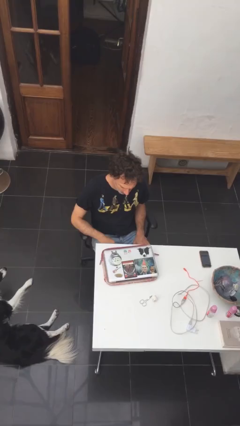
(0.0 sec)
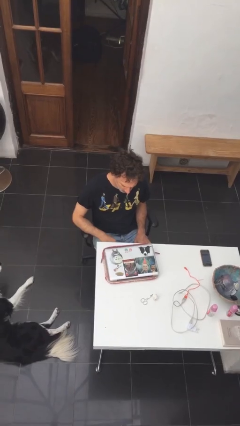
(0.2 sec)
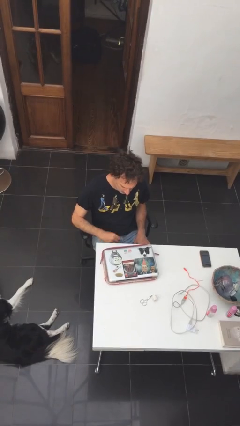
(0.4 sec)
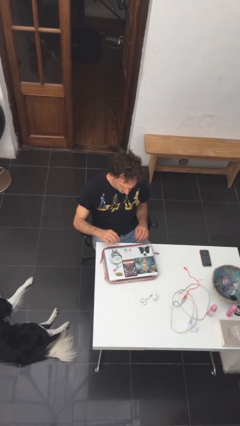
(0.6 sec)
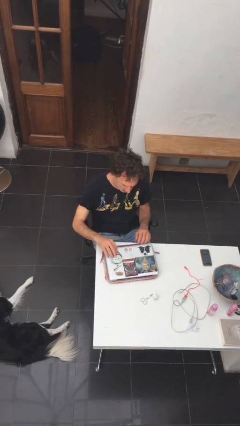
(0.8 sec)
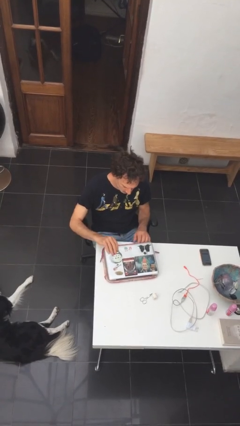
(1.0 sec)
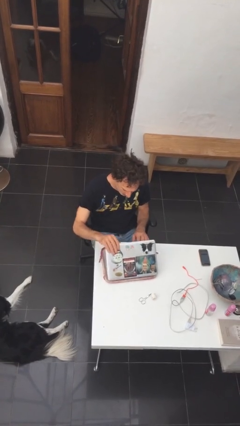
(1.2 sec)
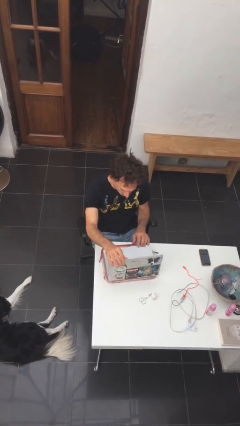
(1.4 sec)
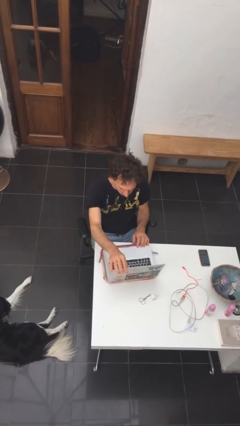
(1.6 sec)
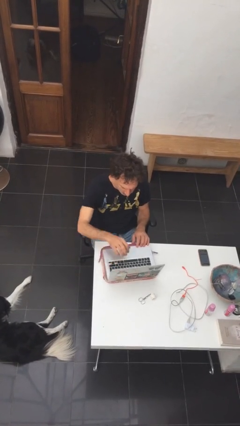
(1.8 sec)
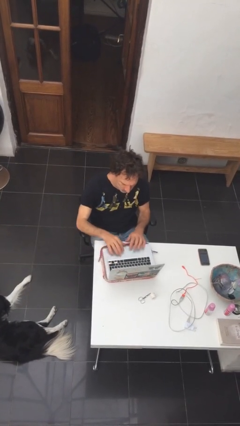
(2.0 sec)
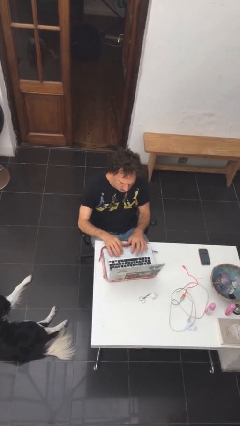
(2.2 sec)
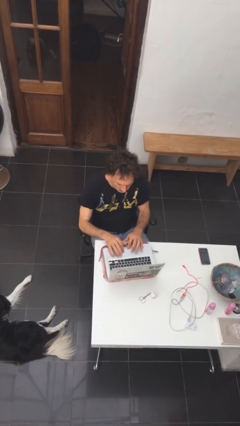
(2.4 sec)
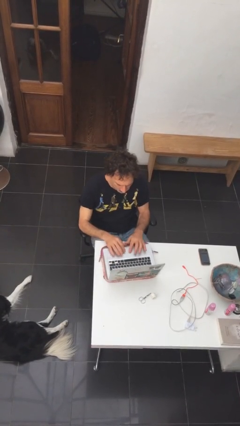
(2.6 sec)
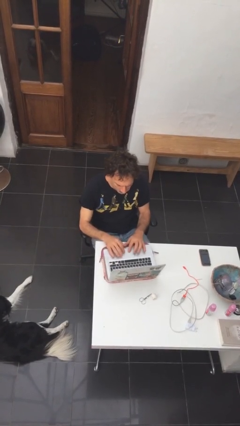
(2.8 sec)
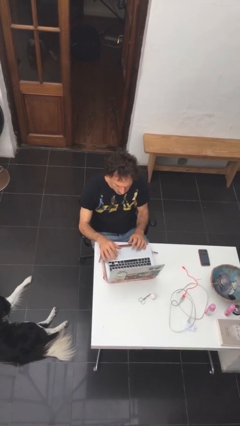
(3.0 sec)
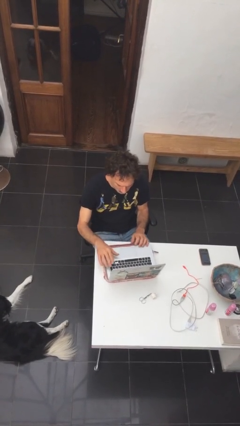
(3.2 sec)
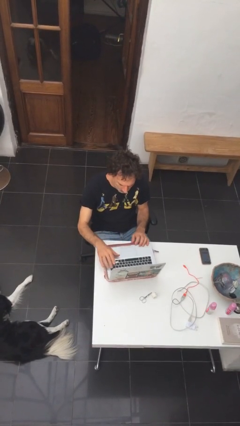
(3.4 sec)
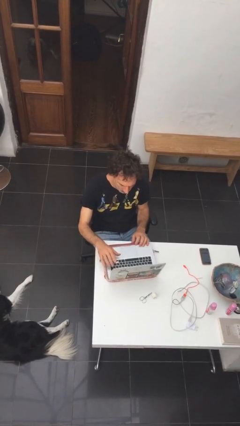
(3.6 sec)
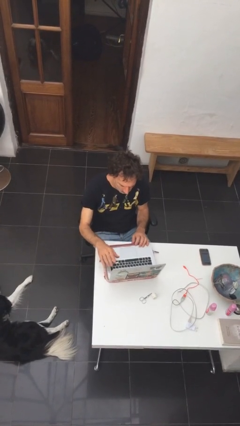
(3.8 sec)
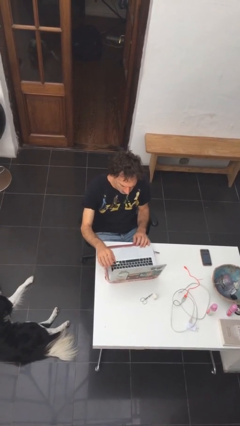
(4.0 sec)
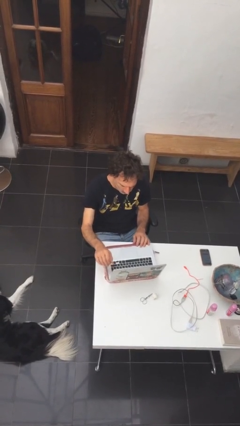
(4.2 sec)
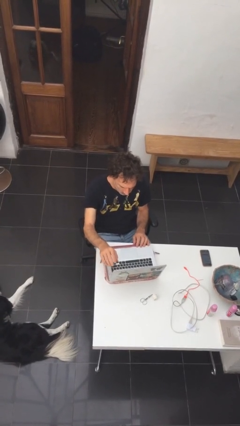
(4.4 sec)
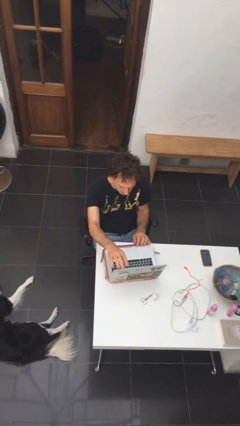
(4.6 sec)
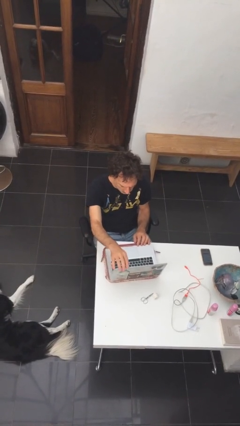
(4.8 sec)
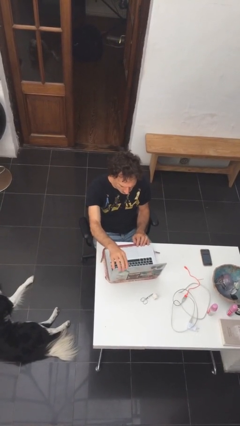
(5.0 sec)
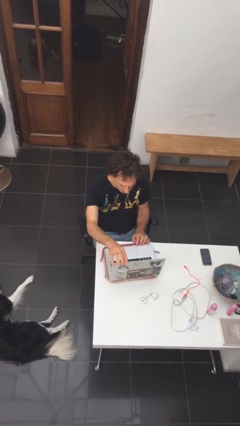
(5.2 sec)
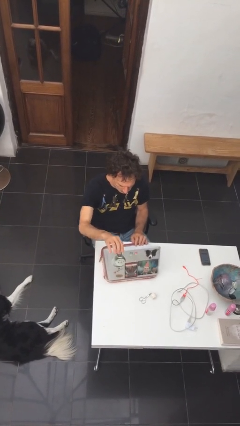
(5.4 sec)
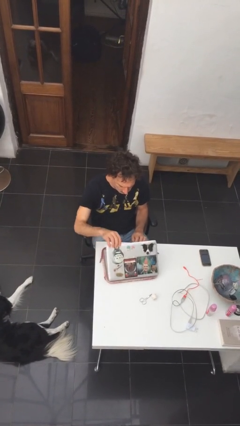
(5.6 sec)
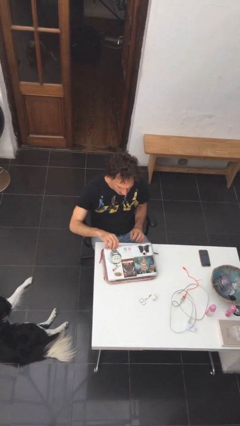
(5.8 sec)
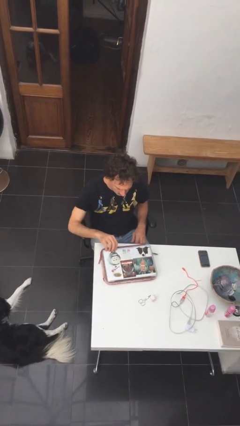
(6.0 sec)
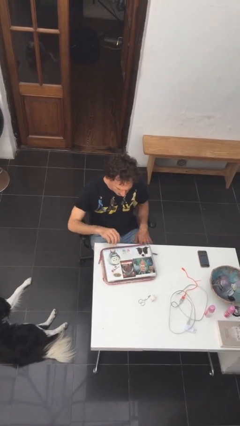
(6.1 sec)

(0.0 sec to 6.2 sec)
person interacts with laptop

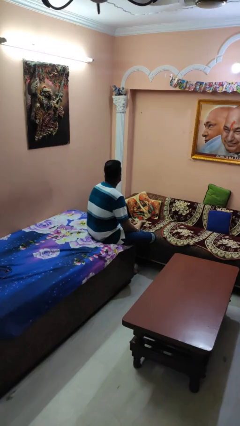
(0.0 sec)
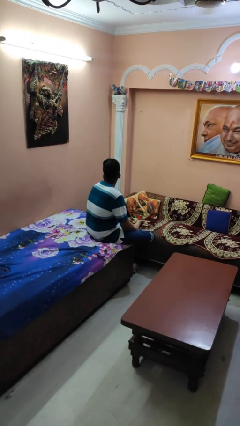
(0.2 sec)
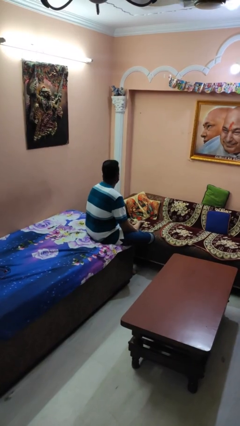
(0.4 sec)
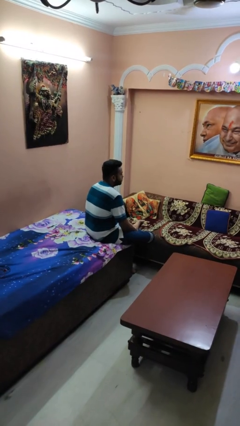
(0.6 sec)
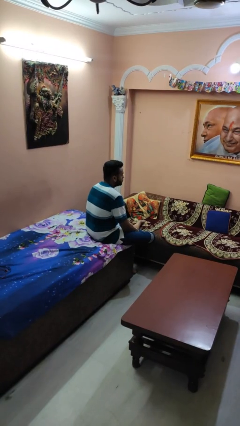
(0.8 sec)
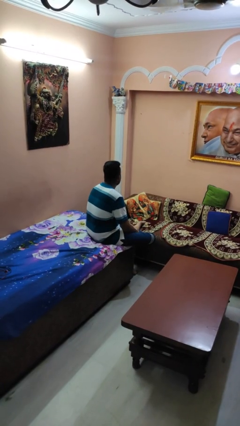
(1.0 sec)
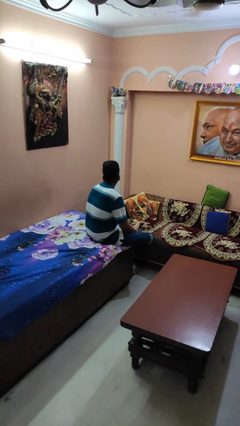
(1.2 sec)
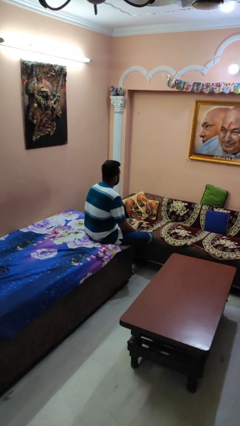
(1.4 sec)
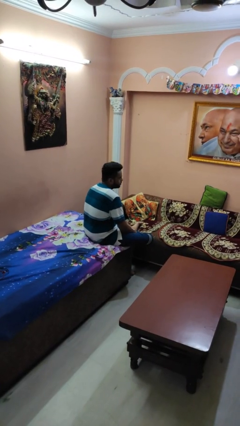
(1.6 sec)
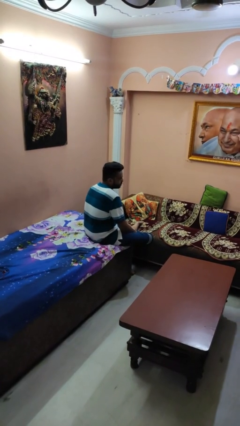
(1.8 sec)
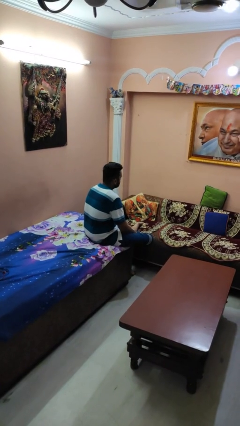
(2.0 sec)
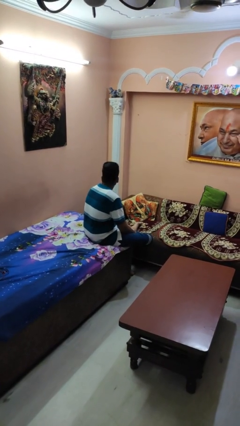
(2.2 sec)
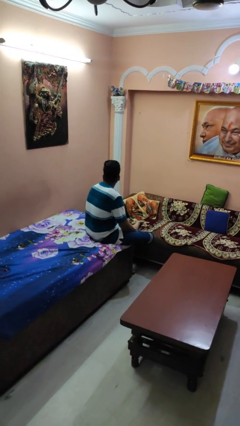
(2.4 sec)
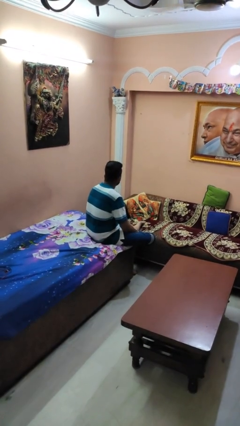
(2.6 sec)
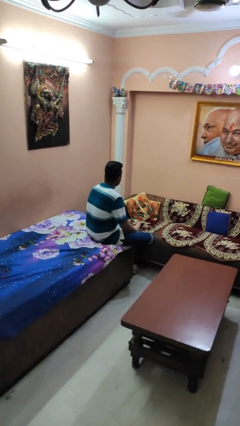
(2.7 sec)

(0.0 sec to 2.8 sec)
person shakes head

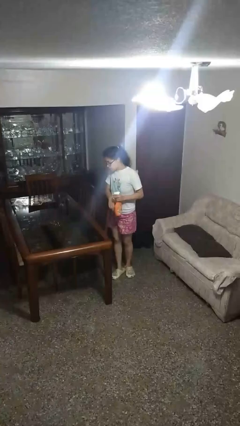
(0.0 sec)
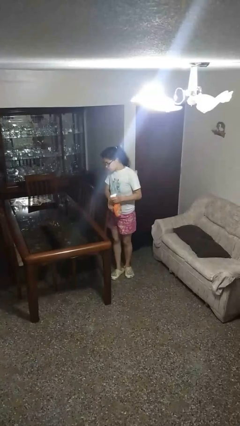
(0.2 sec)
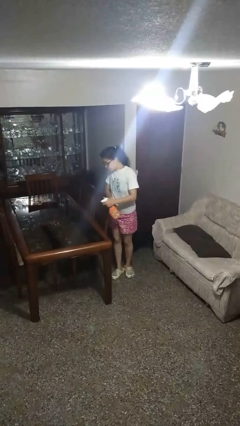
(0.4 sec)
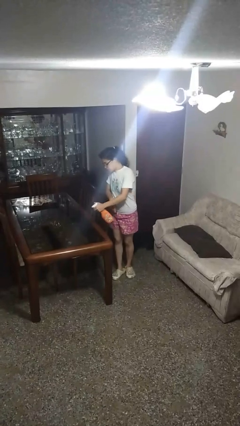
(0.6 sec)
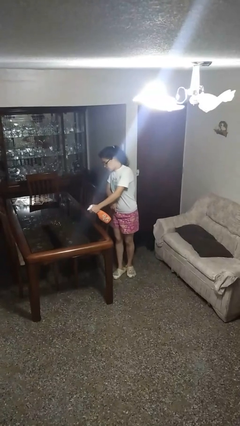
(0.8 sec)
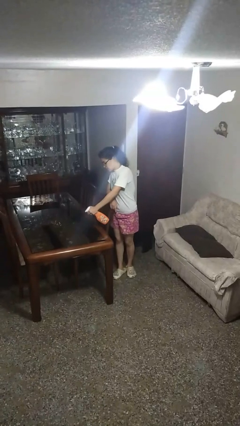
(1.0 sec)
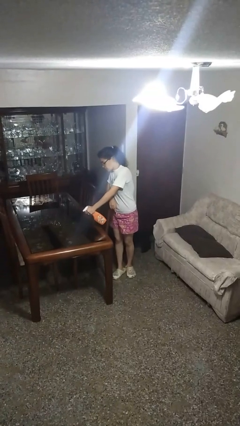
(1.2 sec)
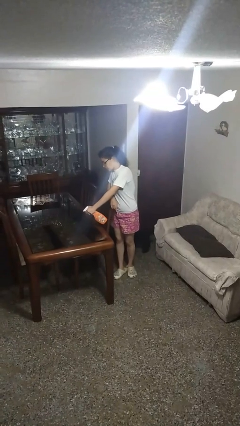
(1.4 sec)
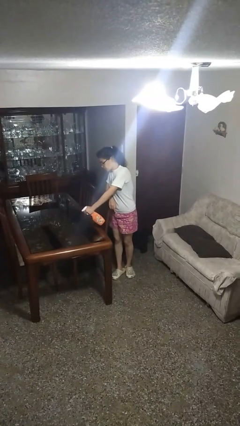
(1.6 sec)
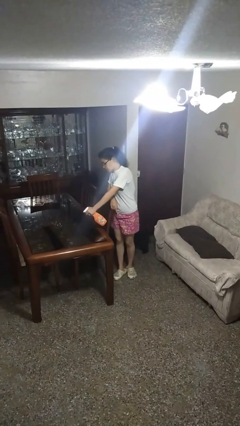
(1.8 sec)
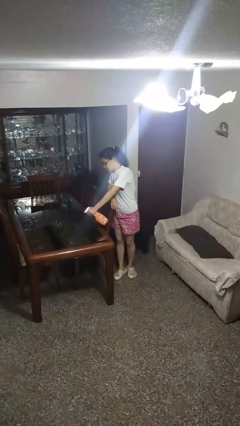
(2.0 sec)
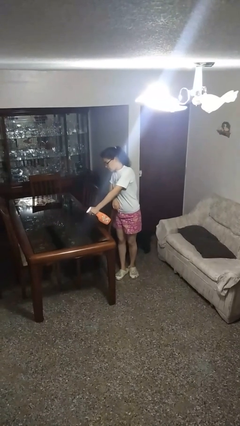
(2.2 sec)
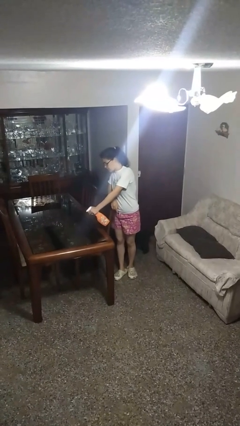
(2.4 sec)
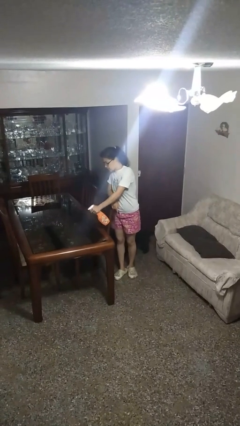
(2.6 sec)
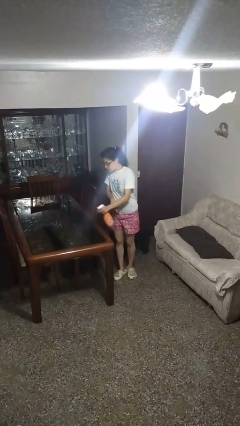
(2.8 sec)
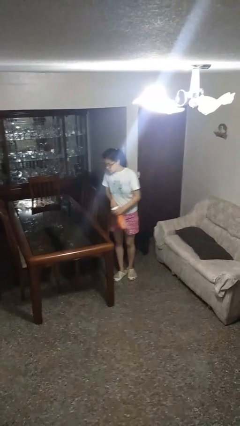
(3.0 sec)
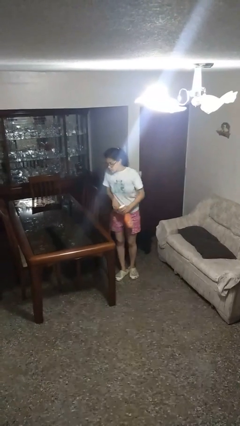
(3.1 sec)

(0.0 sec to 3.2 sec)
person sprays from bottle

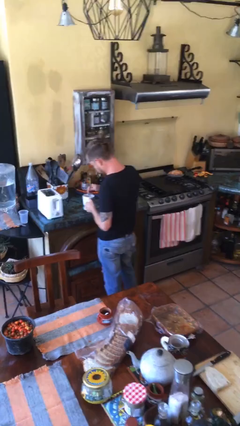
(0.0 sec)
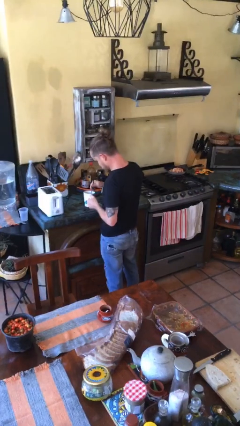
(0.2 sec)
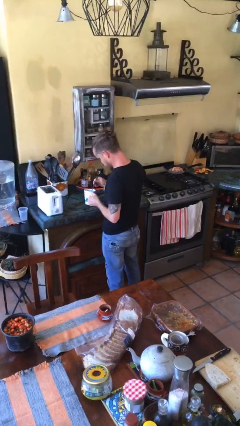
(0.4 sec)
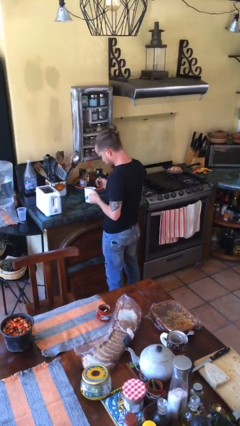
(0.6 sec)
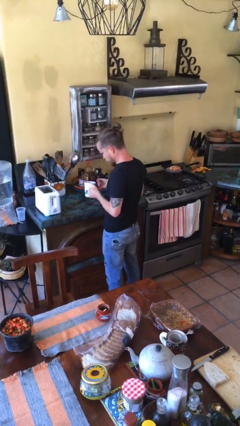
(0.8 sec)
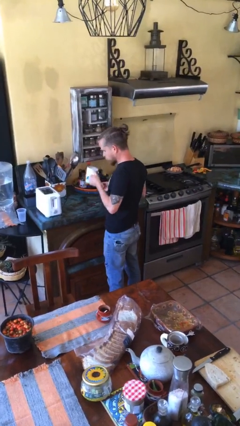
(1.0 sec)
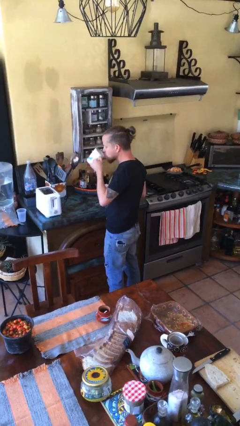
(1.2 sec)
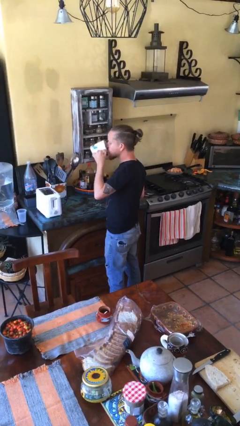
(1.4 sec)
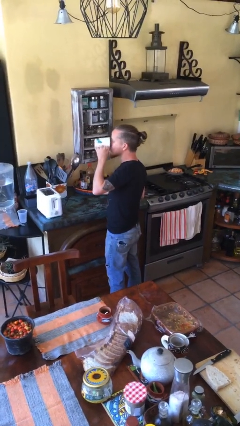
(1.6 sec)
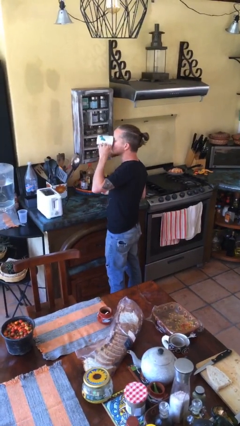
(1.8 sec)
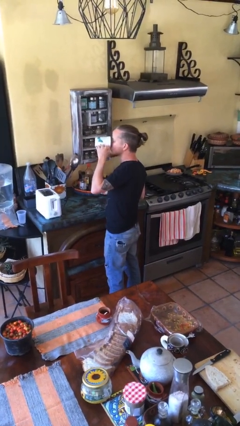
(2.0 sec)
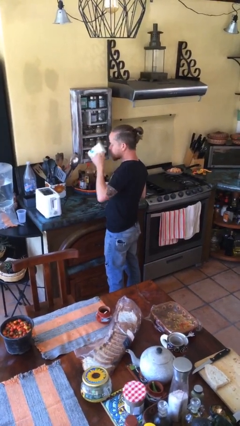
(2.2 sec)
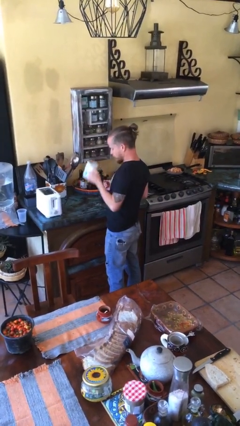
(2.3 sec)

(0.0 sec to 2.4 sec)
person drinks from mug

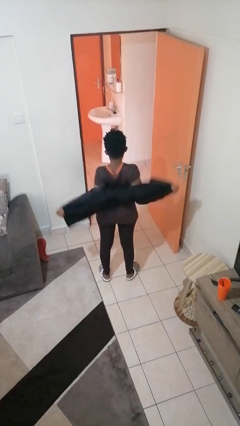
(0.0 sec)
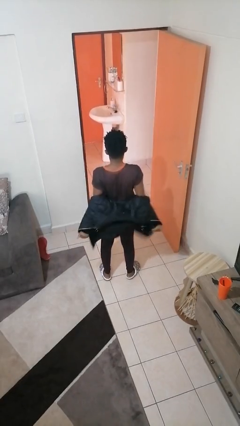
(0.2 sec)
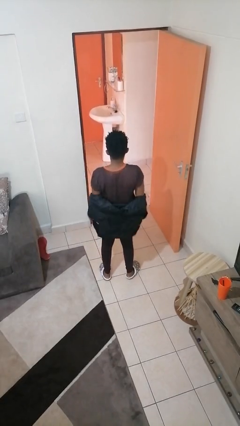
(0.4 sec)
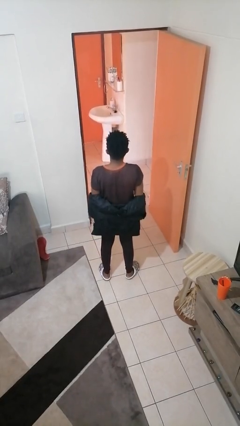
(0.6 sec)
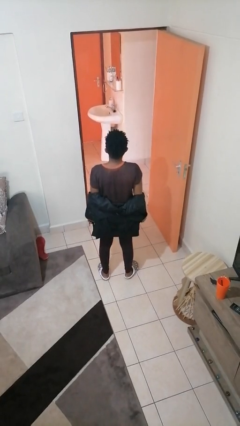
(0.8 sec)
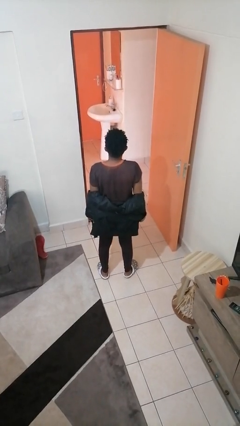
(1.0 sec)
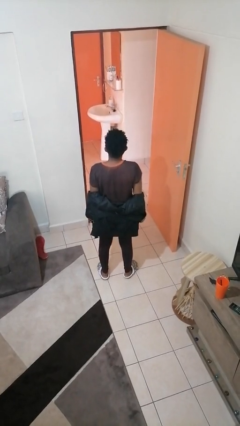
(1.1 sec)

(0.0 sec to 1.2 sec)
person takes off jacket

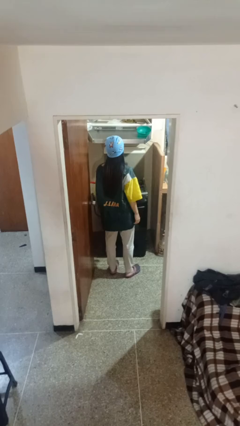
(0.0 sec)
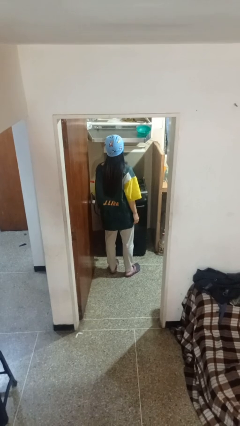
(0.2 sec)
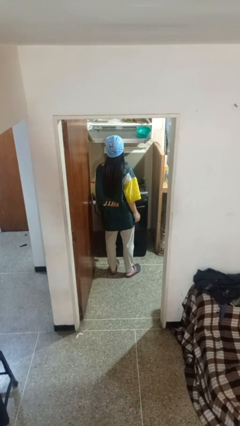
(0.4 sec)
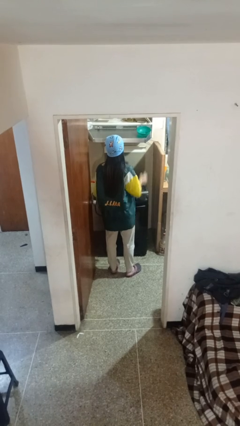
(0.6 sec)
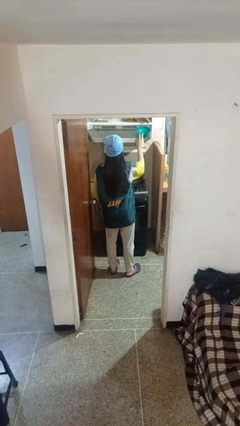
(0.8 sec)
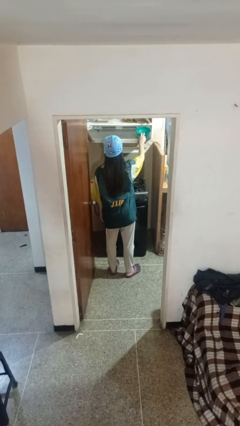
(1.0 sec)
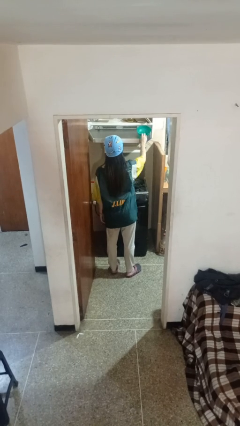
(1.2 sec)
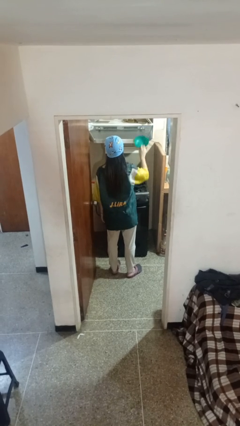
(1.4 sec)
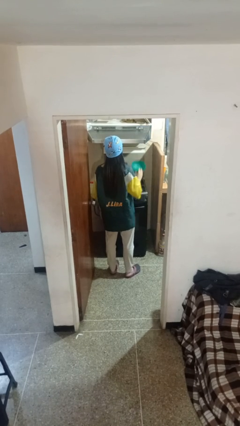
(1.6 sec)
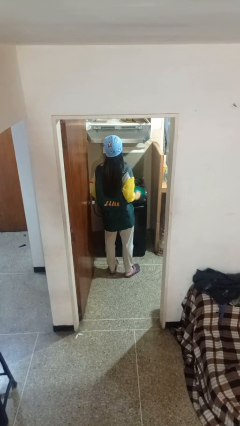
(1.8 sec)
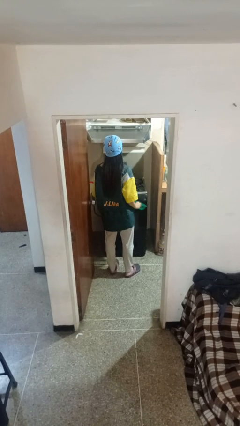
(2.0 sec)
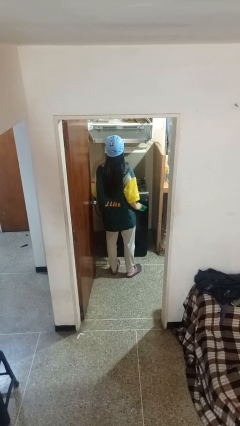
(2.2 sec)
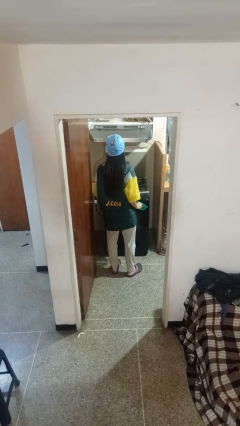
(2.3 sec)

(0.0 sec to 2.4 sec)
person picks up object from countertop
